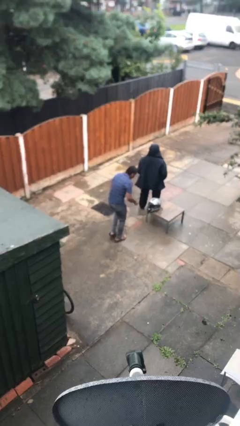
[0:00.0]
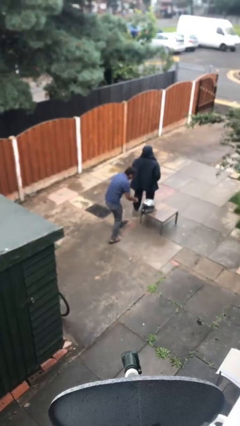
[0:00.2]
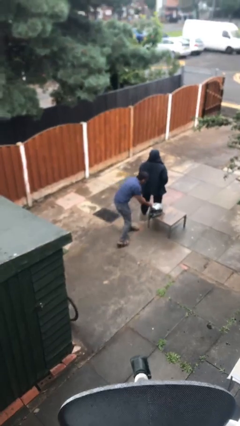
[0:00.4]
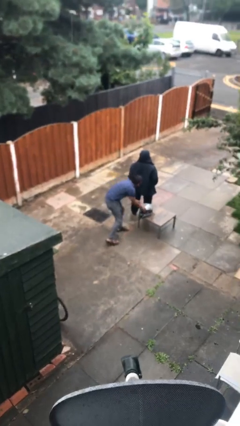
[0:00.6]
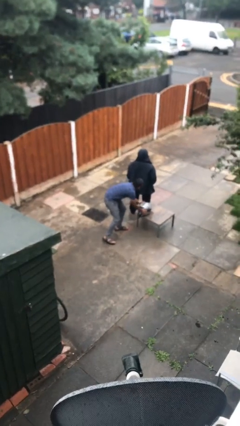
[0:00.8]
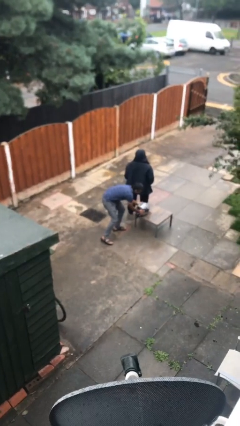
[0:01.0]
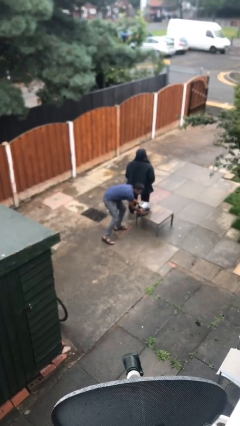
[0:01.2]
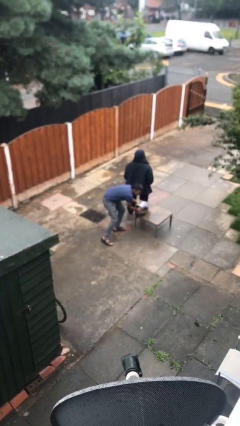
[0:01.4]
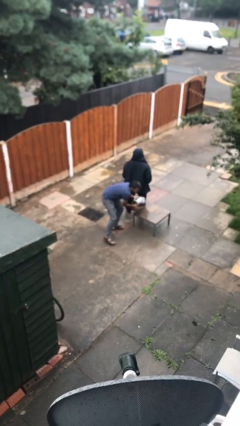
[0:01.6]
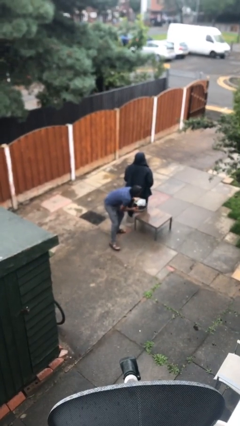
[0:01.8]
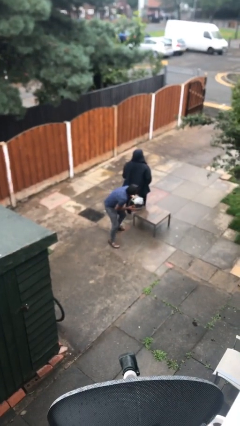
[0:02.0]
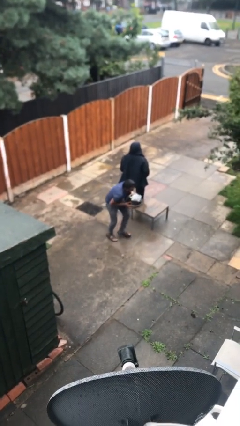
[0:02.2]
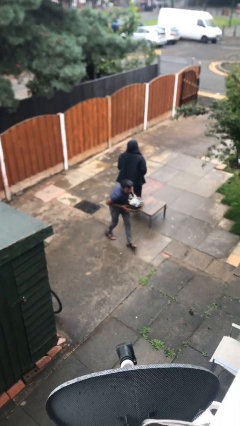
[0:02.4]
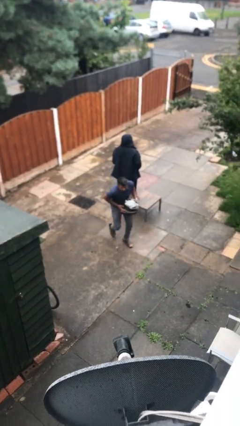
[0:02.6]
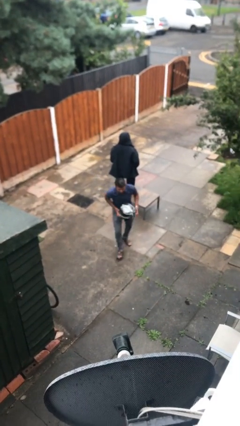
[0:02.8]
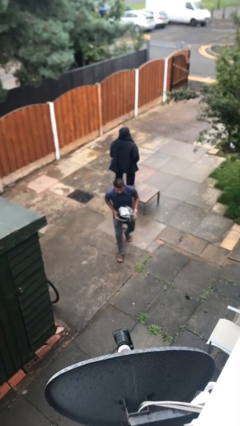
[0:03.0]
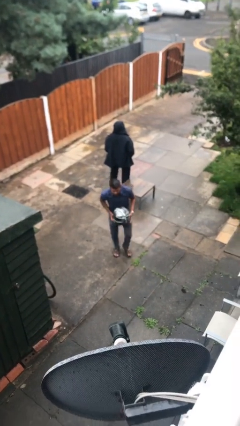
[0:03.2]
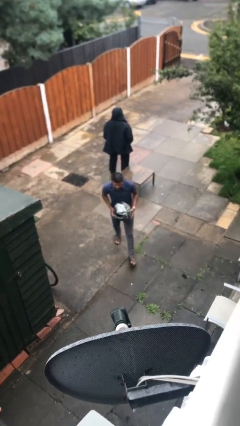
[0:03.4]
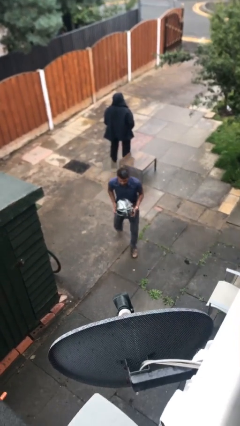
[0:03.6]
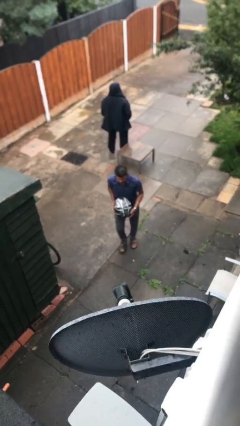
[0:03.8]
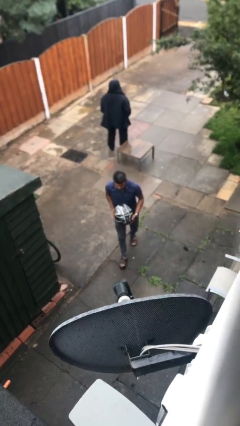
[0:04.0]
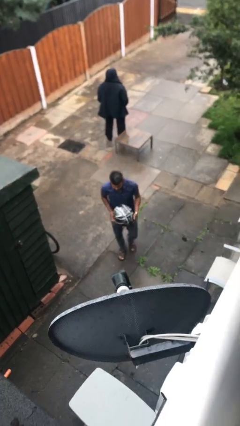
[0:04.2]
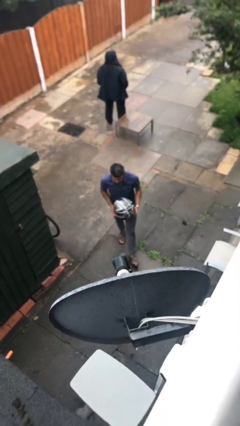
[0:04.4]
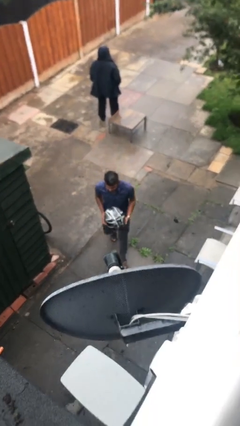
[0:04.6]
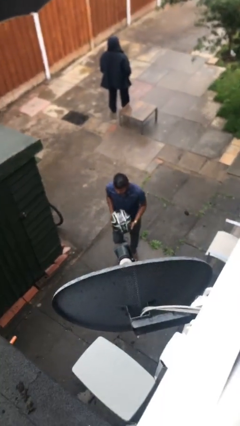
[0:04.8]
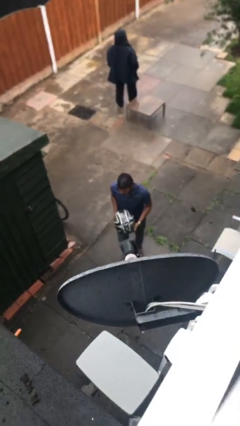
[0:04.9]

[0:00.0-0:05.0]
person steals object from person

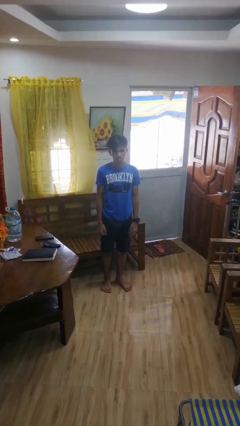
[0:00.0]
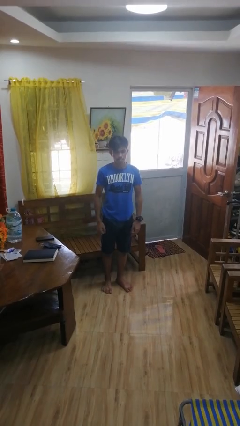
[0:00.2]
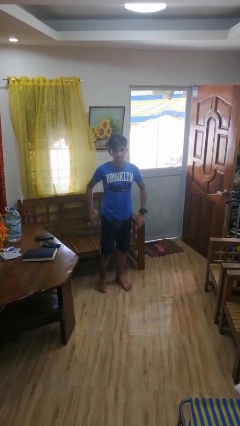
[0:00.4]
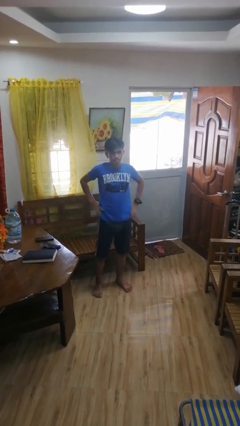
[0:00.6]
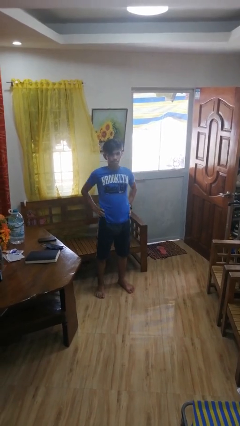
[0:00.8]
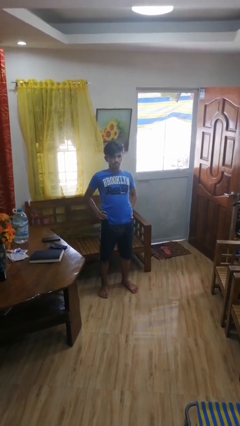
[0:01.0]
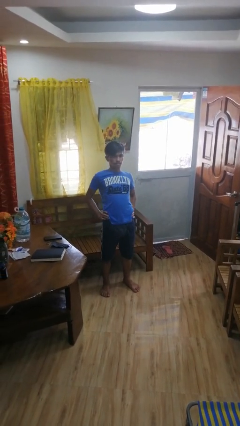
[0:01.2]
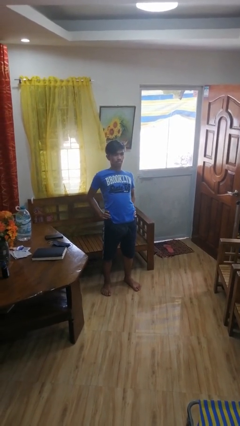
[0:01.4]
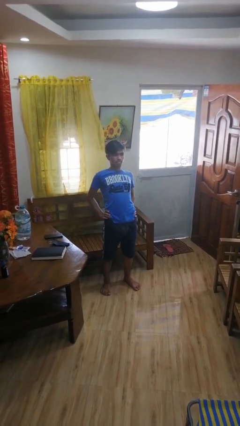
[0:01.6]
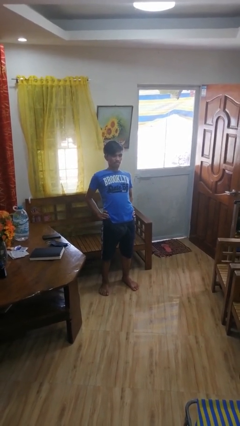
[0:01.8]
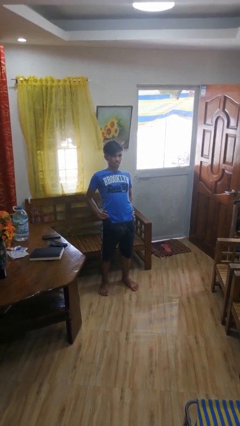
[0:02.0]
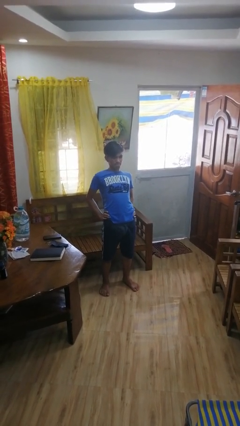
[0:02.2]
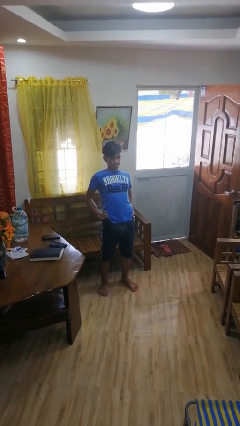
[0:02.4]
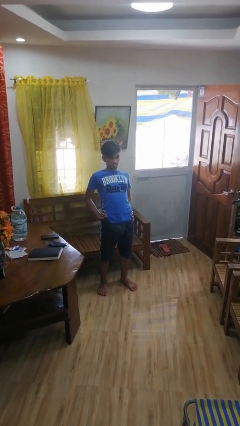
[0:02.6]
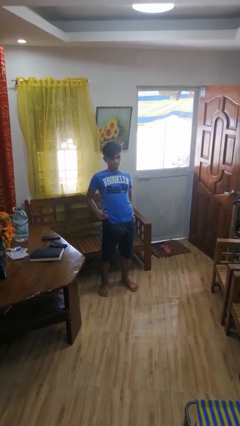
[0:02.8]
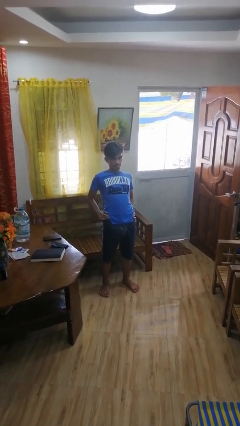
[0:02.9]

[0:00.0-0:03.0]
person stretches back

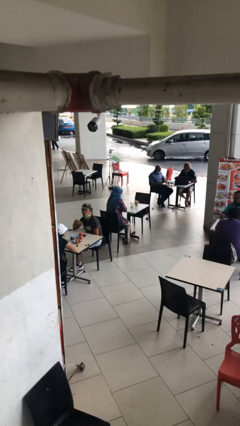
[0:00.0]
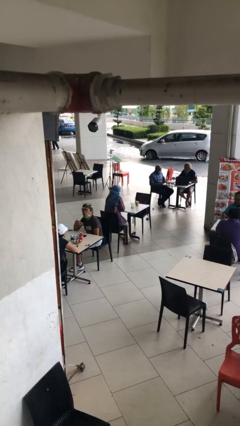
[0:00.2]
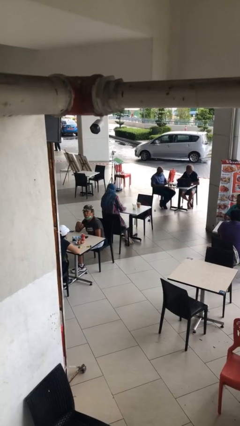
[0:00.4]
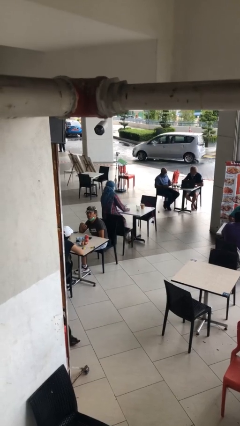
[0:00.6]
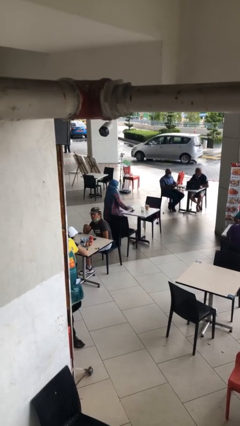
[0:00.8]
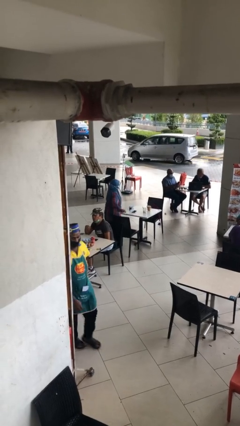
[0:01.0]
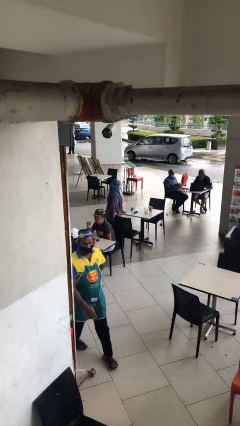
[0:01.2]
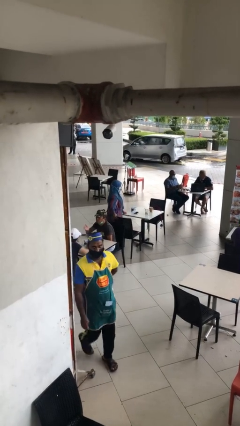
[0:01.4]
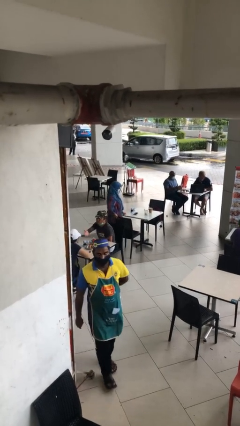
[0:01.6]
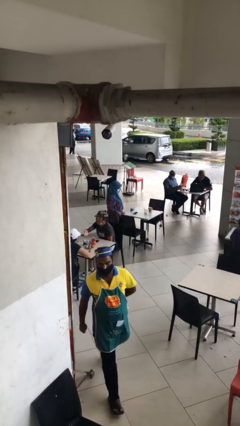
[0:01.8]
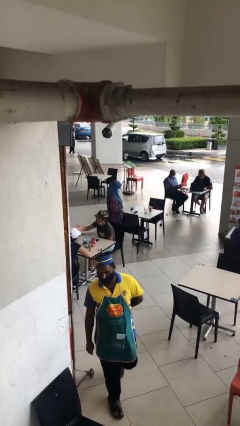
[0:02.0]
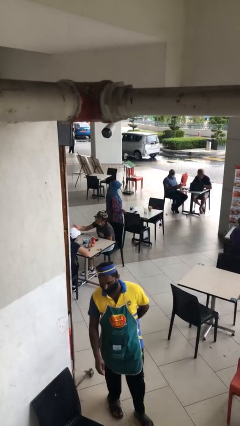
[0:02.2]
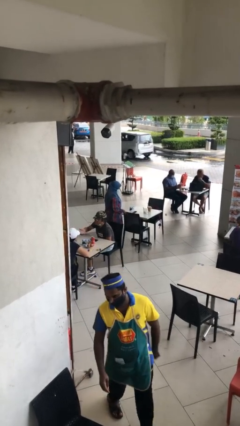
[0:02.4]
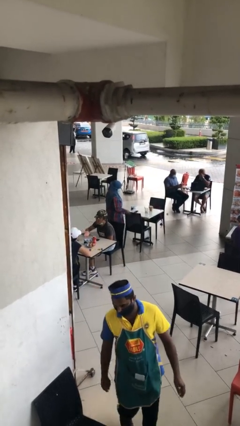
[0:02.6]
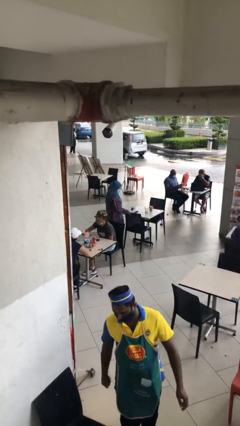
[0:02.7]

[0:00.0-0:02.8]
person stands up

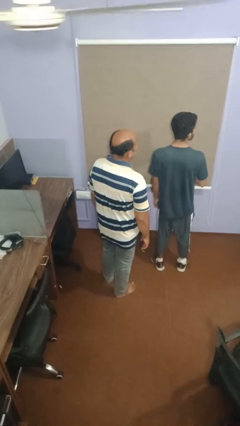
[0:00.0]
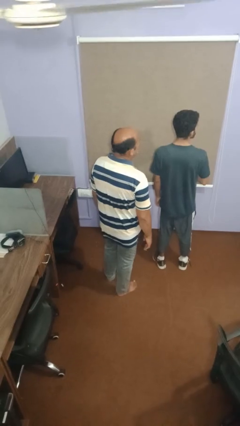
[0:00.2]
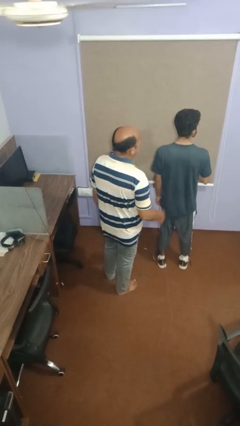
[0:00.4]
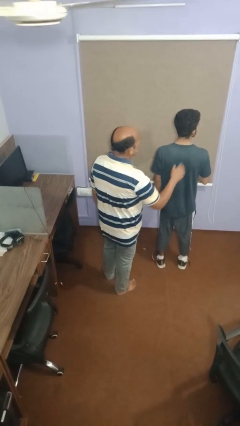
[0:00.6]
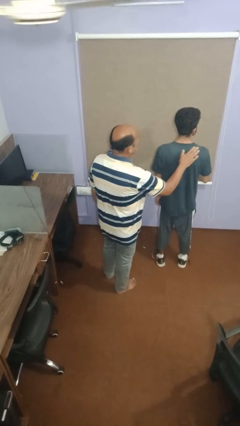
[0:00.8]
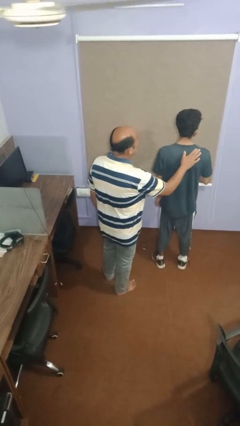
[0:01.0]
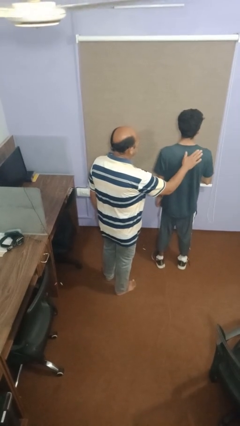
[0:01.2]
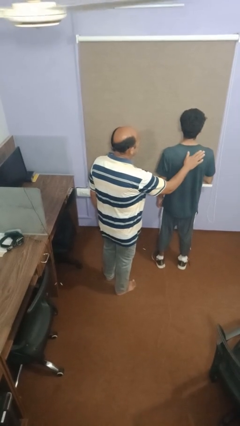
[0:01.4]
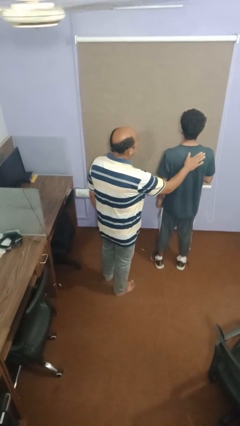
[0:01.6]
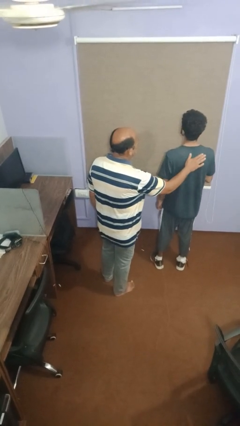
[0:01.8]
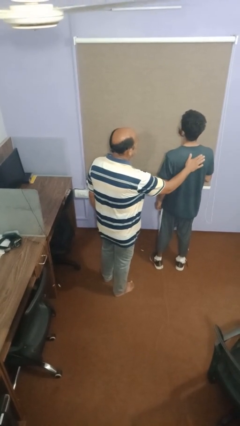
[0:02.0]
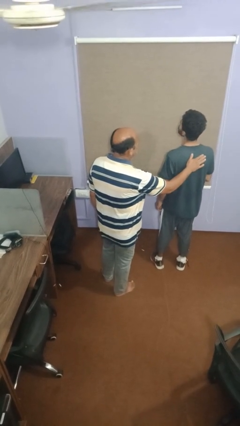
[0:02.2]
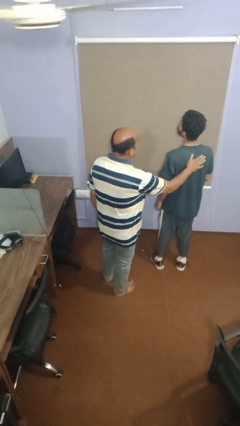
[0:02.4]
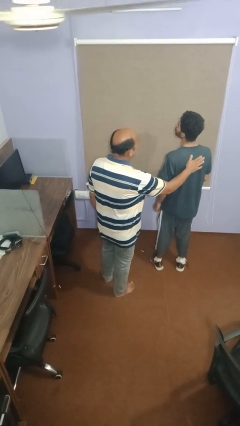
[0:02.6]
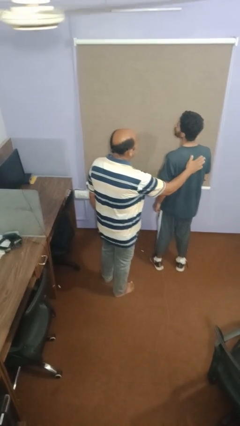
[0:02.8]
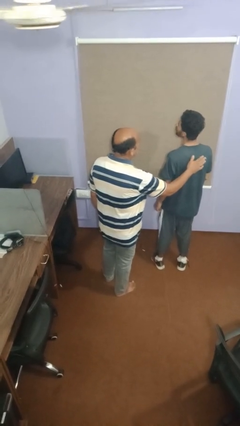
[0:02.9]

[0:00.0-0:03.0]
person touches back of person

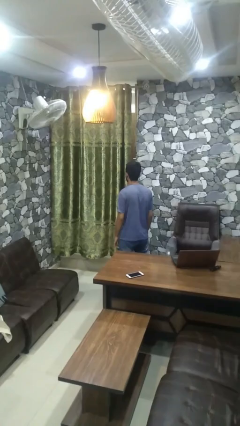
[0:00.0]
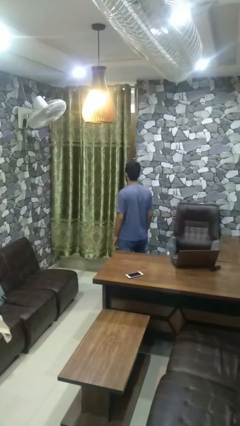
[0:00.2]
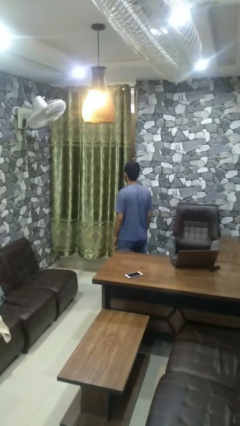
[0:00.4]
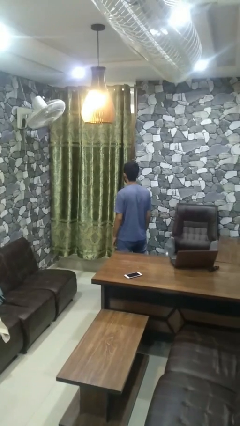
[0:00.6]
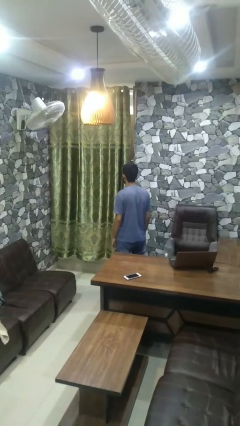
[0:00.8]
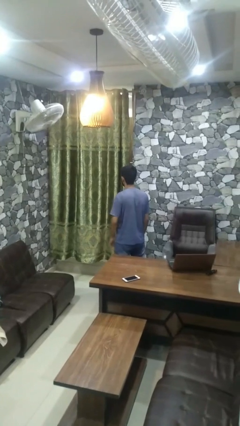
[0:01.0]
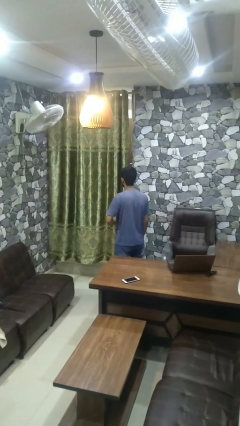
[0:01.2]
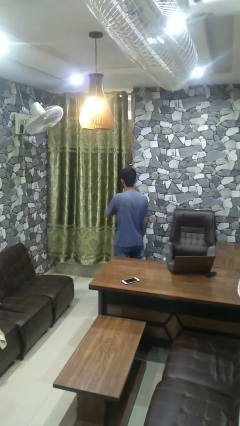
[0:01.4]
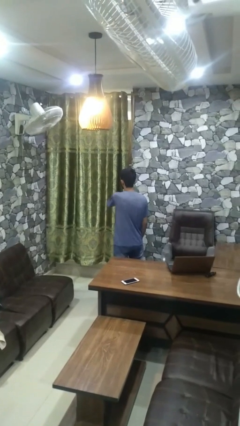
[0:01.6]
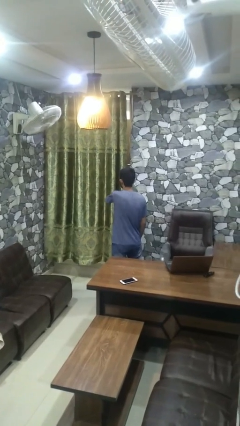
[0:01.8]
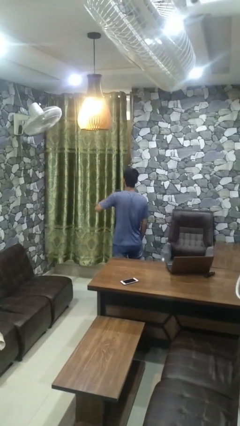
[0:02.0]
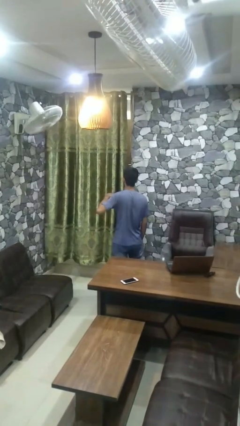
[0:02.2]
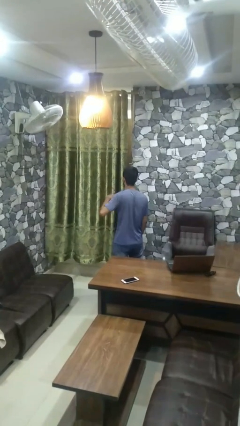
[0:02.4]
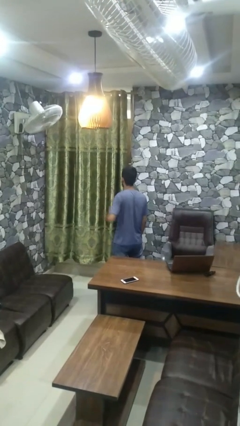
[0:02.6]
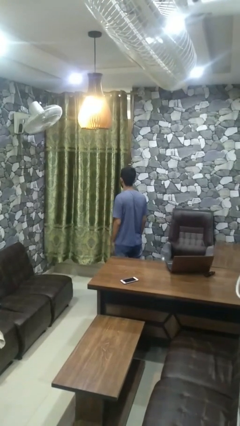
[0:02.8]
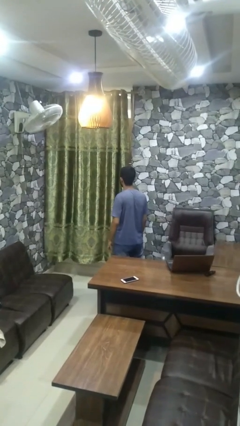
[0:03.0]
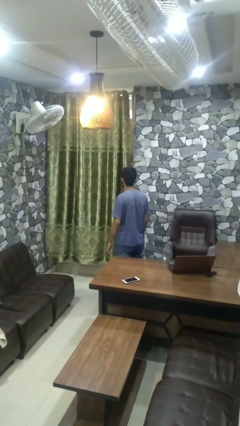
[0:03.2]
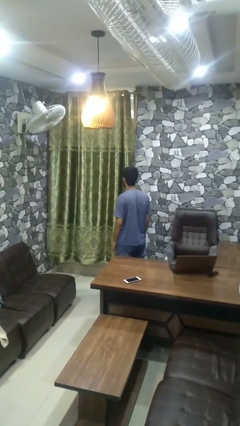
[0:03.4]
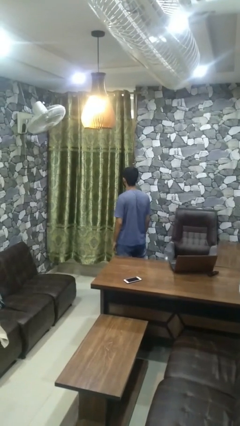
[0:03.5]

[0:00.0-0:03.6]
person gestures cut
